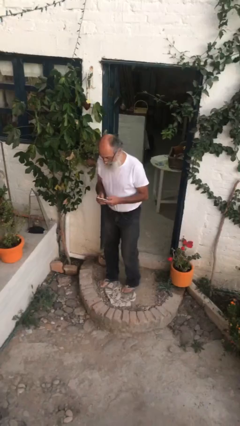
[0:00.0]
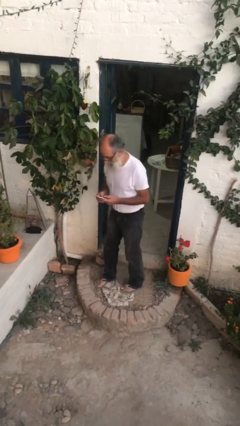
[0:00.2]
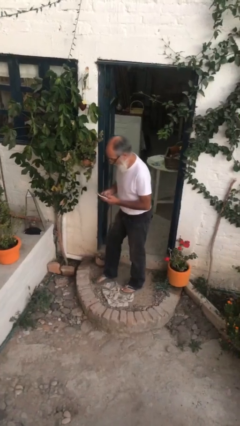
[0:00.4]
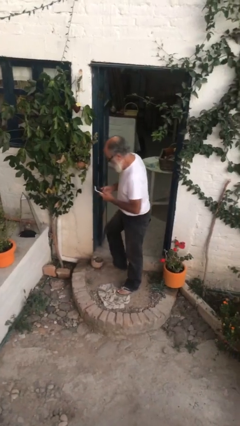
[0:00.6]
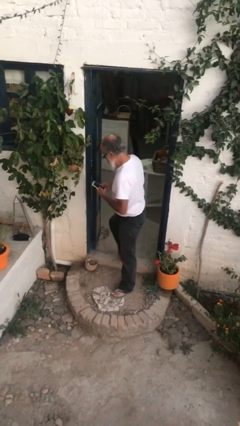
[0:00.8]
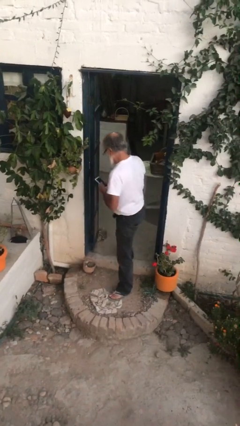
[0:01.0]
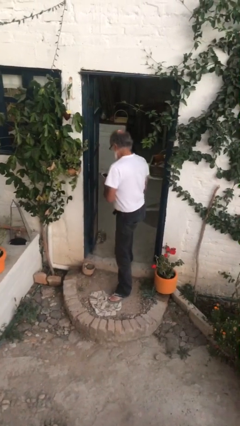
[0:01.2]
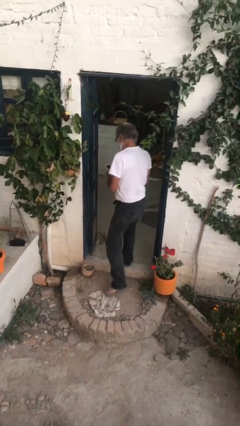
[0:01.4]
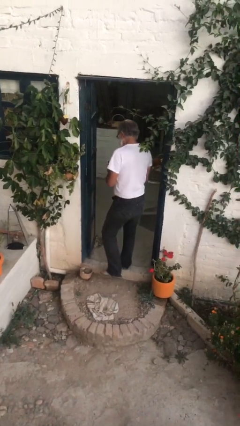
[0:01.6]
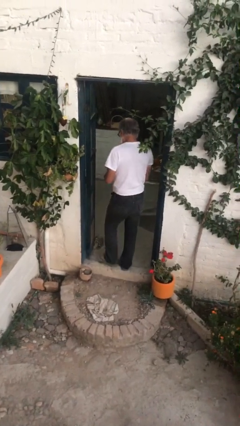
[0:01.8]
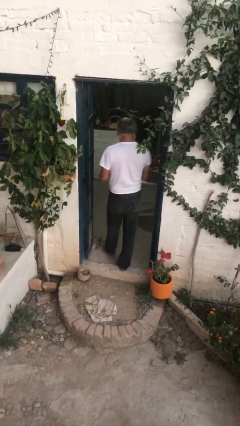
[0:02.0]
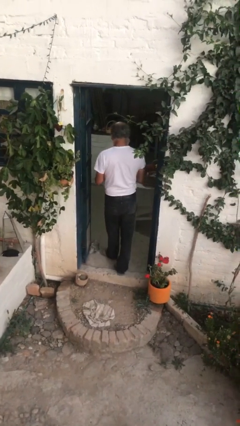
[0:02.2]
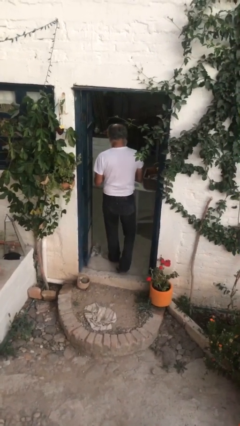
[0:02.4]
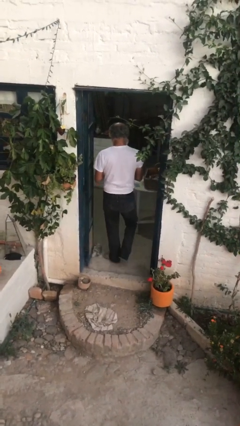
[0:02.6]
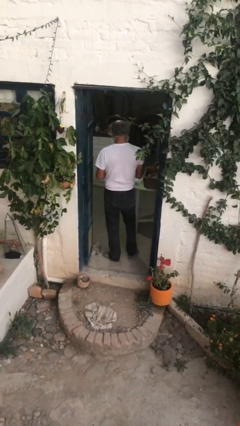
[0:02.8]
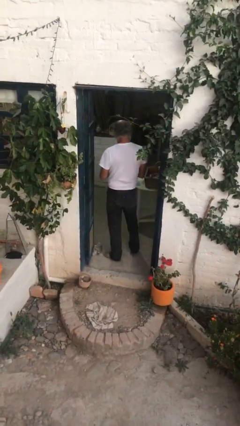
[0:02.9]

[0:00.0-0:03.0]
person exits scene through structure

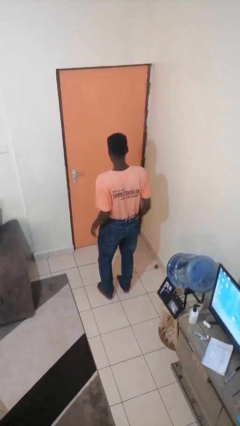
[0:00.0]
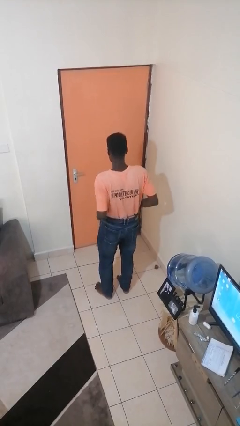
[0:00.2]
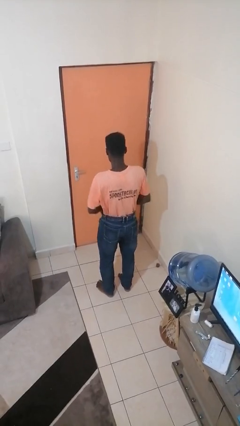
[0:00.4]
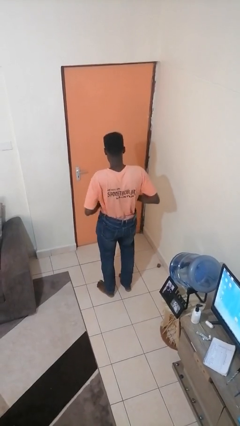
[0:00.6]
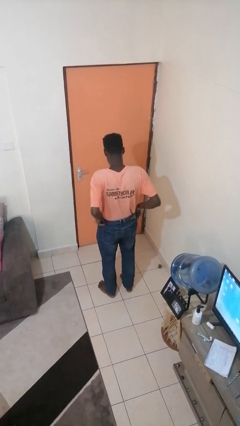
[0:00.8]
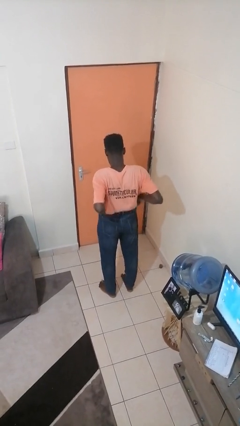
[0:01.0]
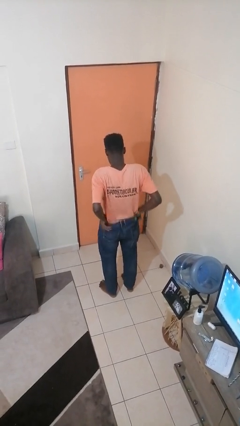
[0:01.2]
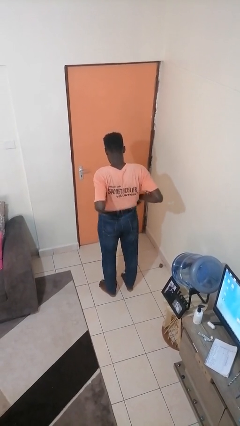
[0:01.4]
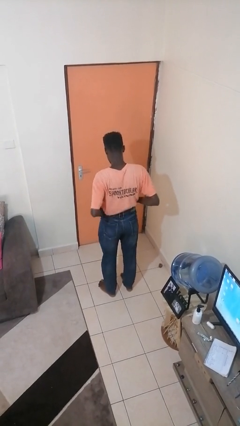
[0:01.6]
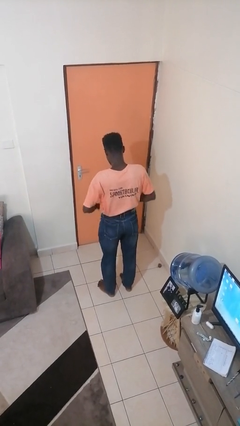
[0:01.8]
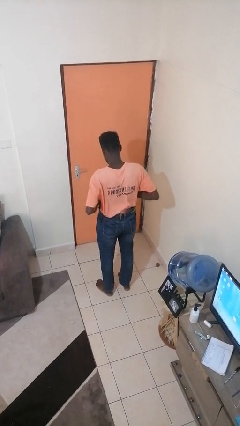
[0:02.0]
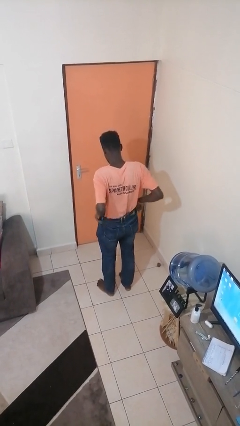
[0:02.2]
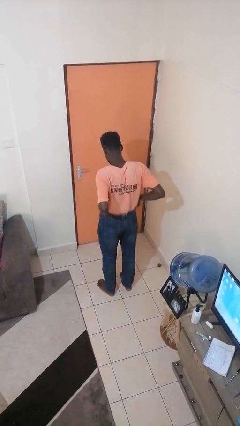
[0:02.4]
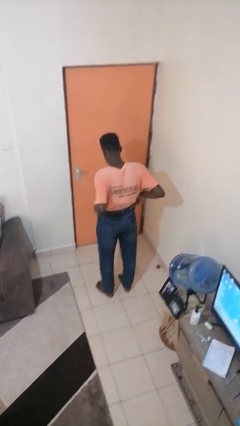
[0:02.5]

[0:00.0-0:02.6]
person hikes up pants

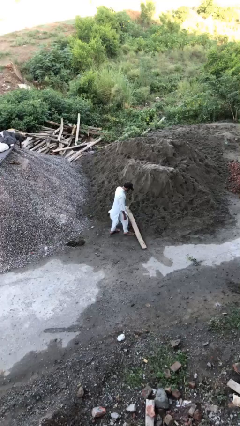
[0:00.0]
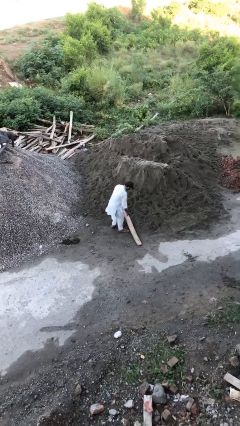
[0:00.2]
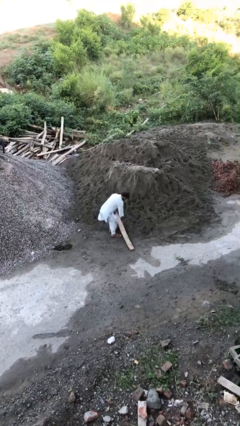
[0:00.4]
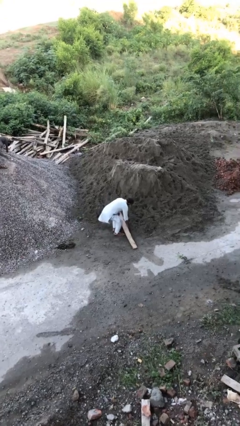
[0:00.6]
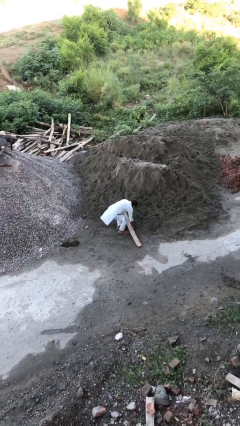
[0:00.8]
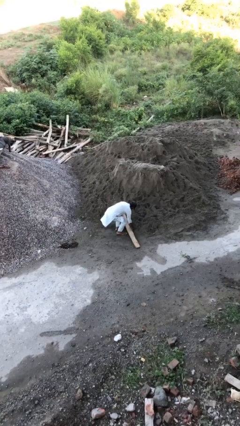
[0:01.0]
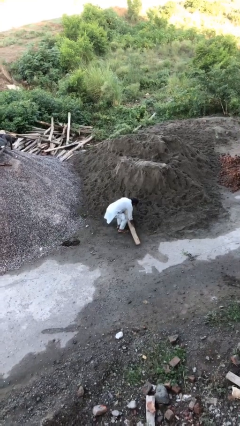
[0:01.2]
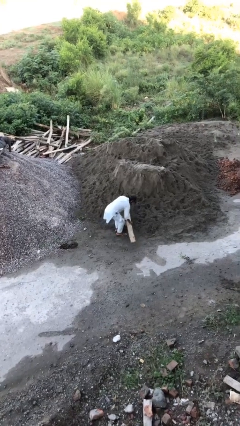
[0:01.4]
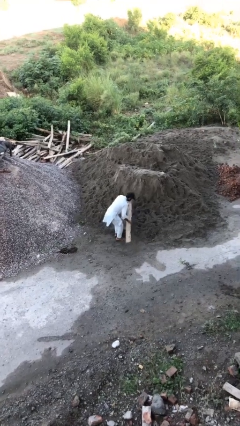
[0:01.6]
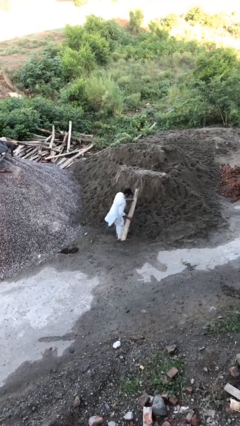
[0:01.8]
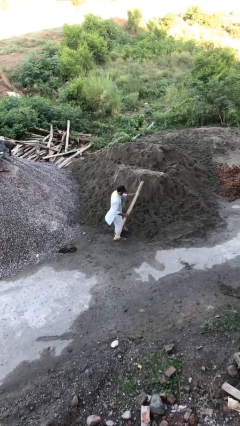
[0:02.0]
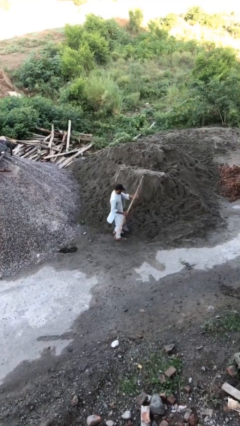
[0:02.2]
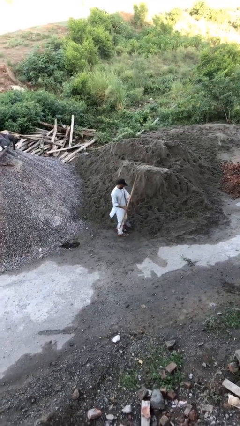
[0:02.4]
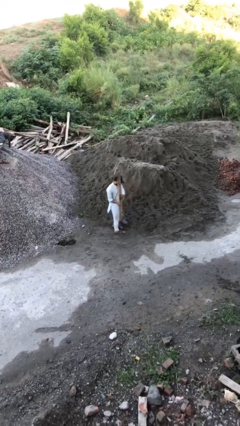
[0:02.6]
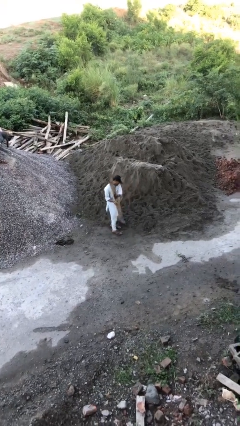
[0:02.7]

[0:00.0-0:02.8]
person picks up object from floor

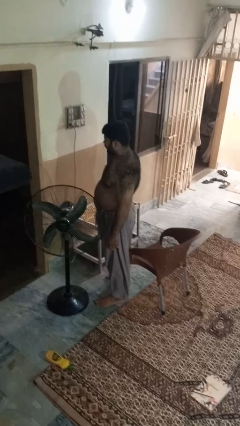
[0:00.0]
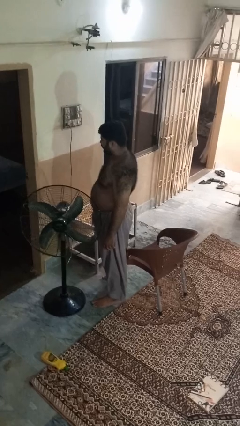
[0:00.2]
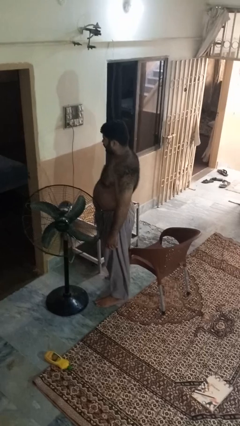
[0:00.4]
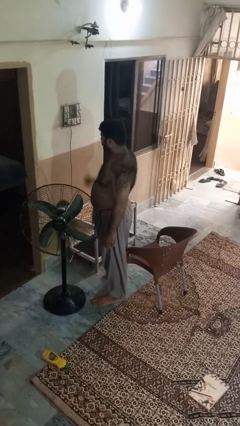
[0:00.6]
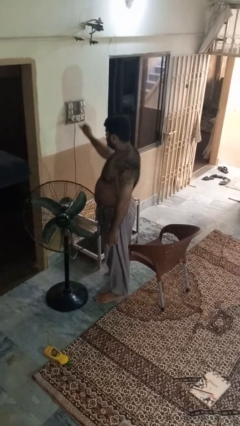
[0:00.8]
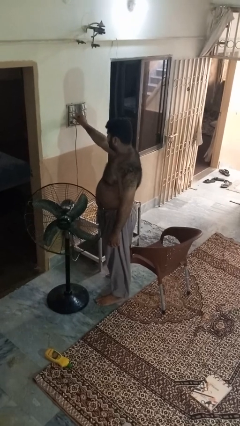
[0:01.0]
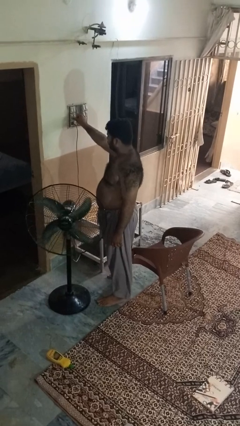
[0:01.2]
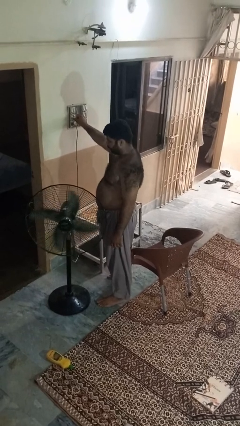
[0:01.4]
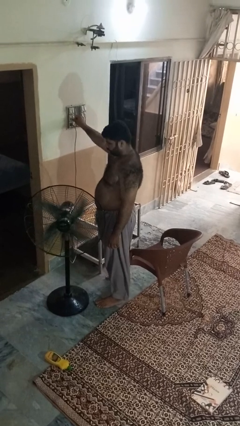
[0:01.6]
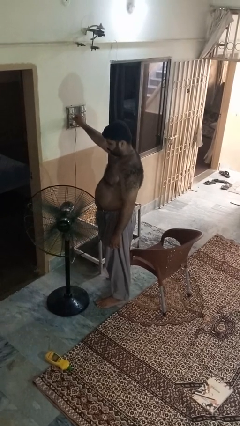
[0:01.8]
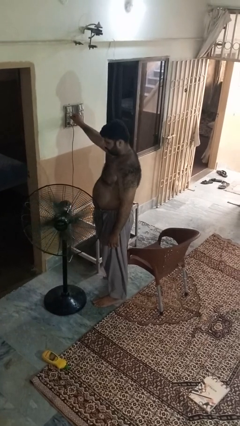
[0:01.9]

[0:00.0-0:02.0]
person turns on fan

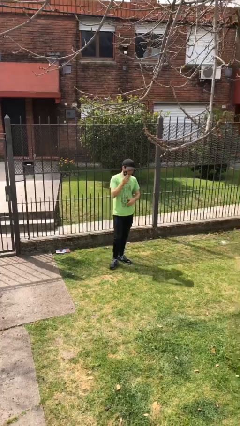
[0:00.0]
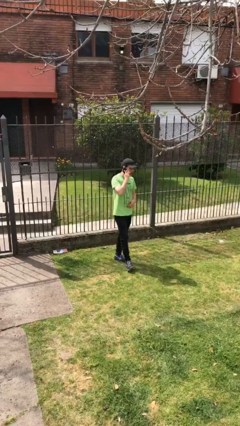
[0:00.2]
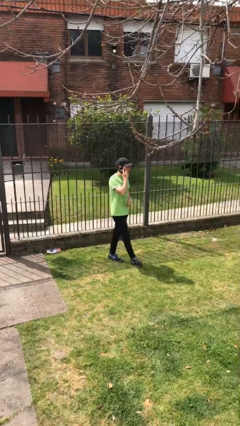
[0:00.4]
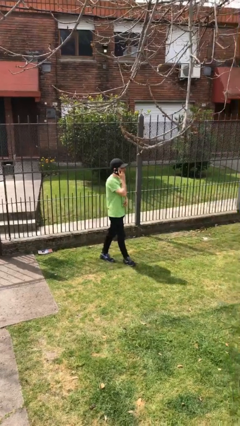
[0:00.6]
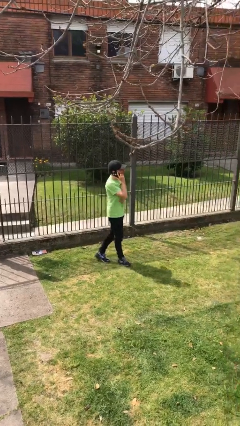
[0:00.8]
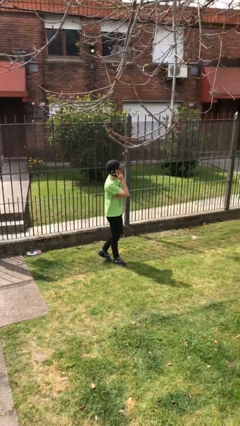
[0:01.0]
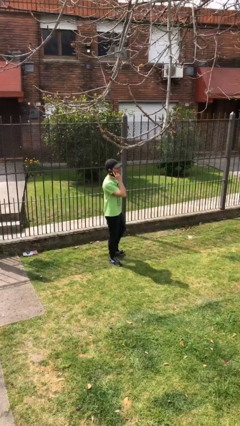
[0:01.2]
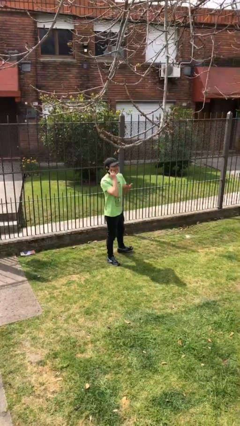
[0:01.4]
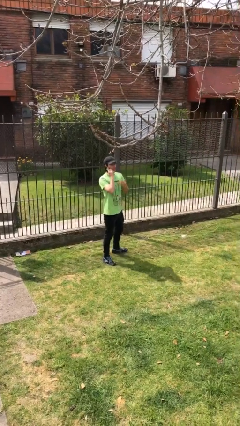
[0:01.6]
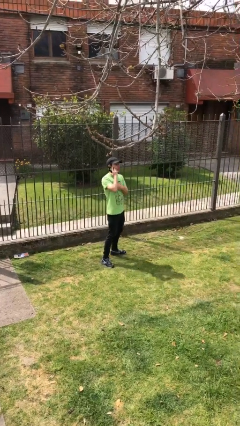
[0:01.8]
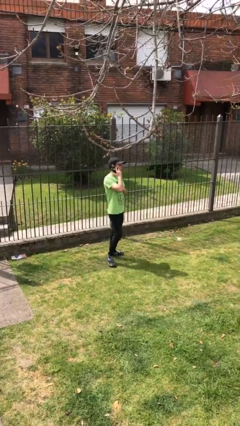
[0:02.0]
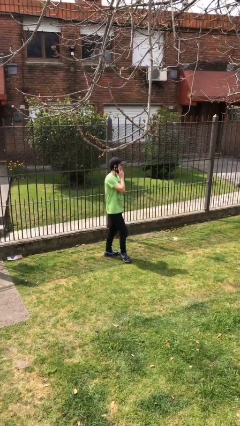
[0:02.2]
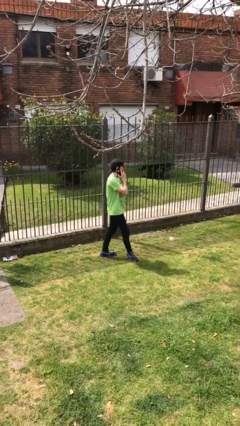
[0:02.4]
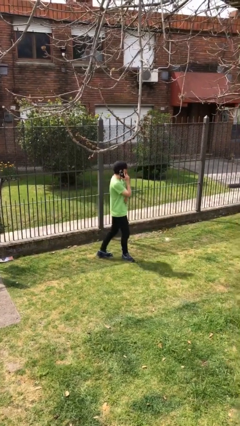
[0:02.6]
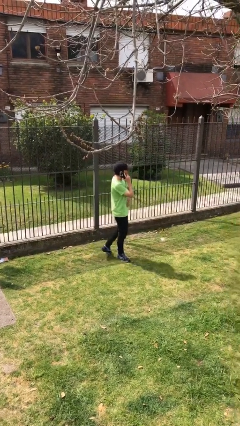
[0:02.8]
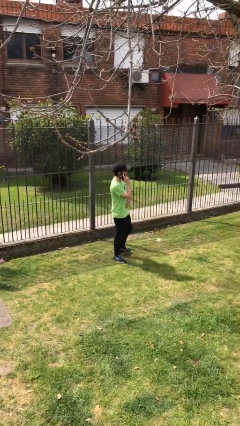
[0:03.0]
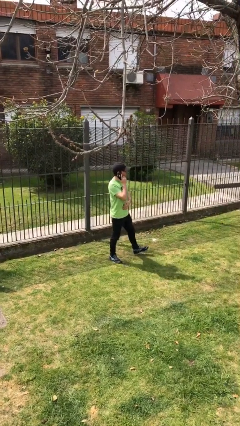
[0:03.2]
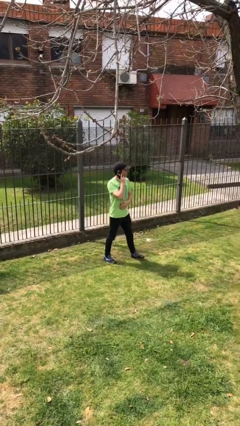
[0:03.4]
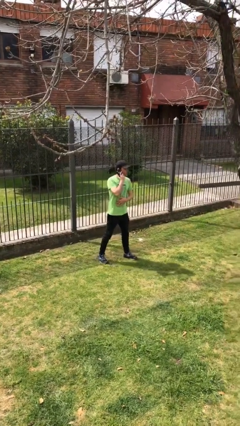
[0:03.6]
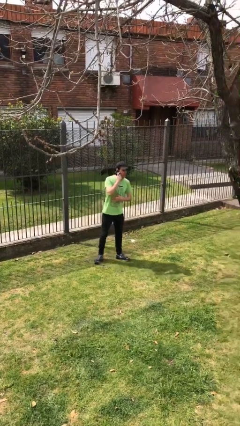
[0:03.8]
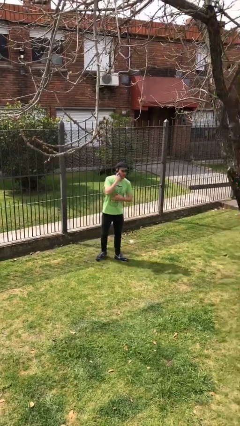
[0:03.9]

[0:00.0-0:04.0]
person talks on phone

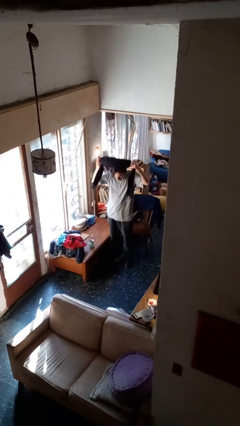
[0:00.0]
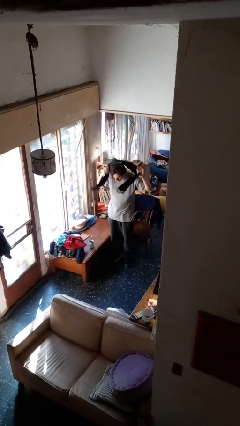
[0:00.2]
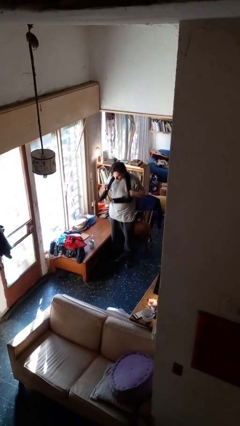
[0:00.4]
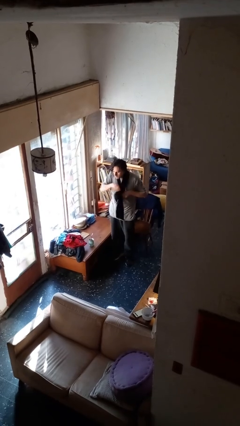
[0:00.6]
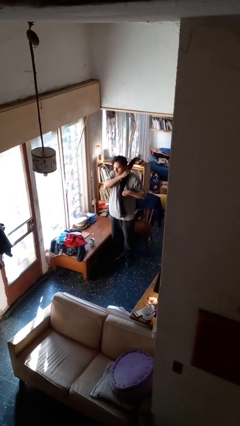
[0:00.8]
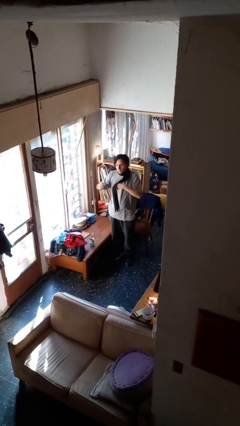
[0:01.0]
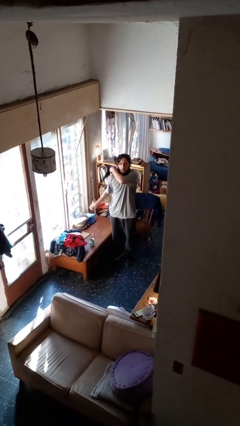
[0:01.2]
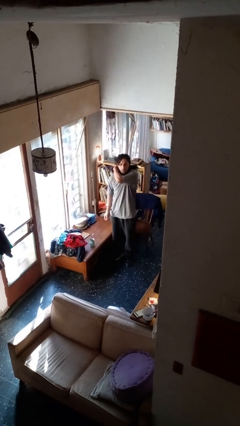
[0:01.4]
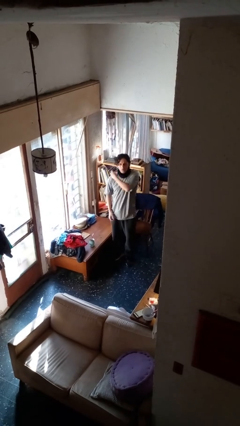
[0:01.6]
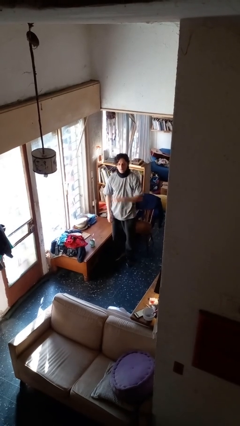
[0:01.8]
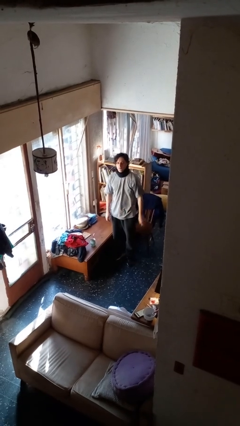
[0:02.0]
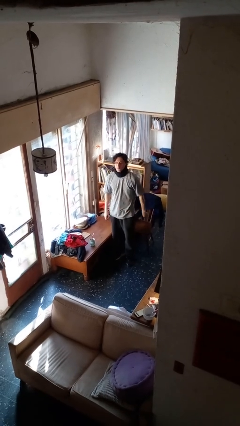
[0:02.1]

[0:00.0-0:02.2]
person puts on scarf

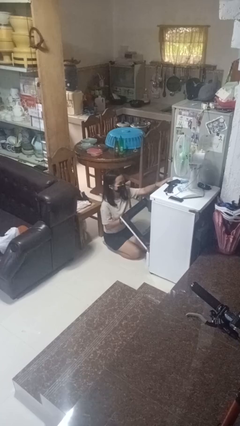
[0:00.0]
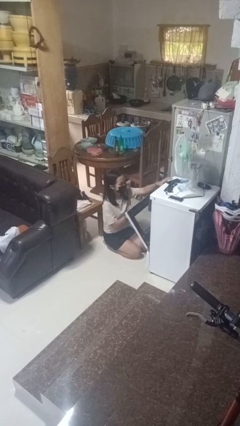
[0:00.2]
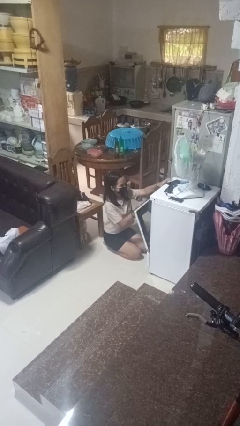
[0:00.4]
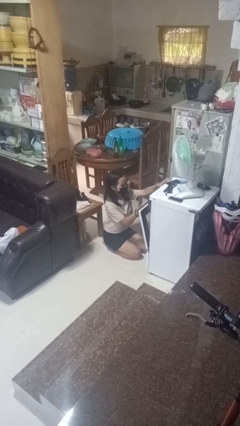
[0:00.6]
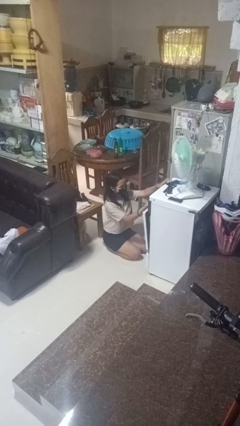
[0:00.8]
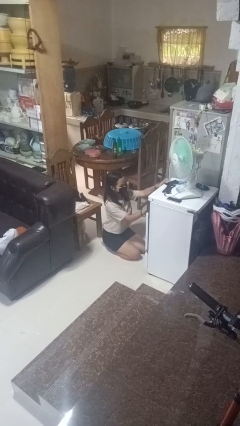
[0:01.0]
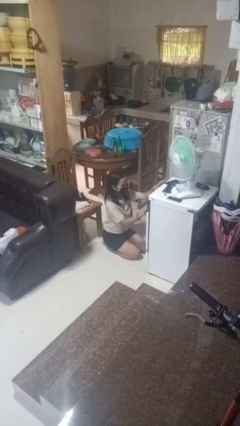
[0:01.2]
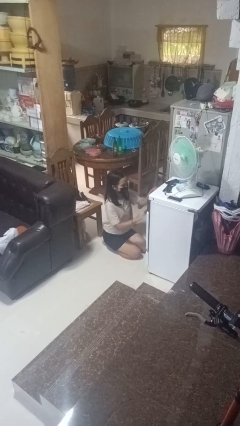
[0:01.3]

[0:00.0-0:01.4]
person closes oven door
